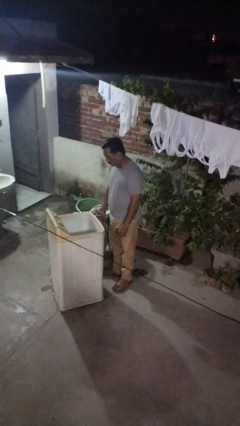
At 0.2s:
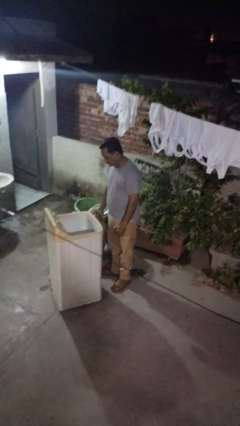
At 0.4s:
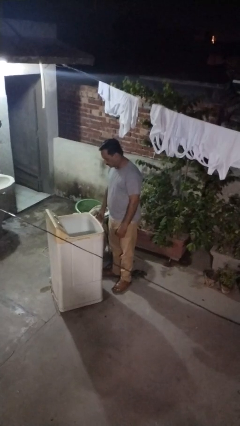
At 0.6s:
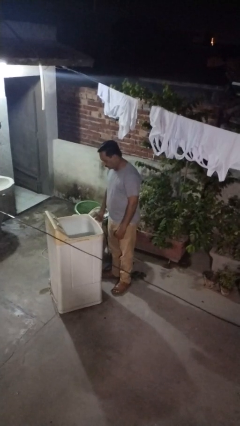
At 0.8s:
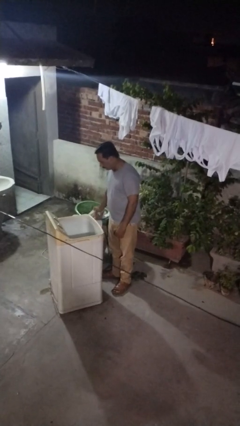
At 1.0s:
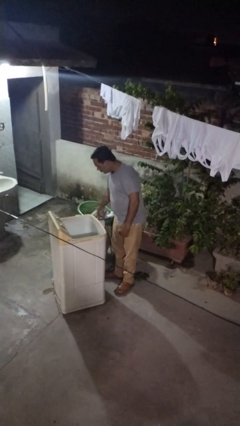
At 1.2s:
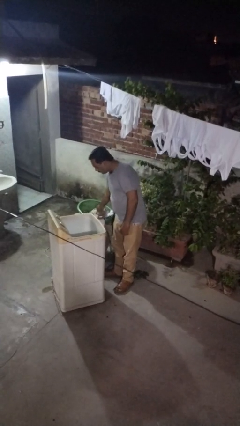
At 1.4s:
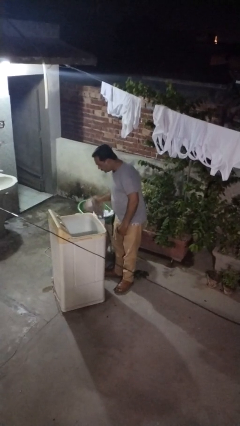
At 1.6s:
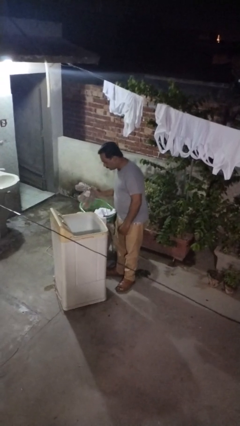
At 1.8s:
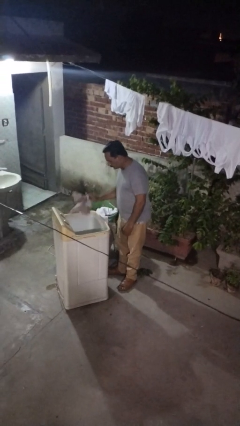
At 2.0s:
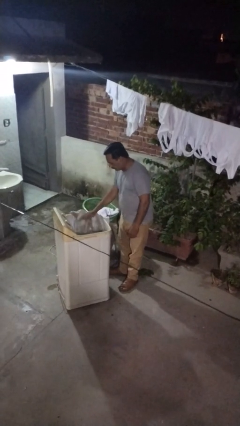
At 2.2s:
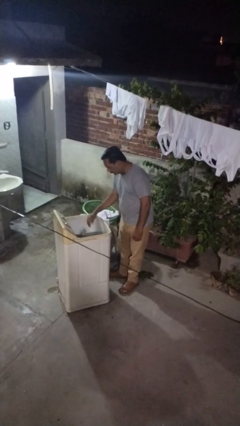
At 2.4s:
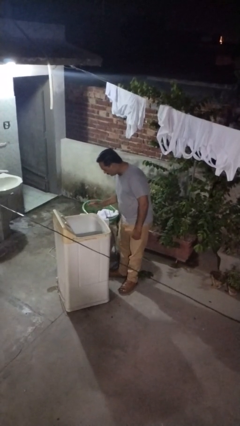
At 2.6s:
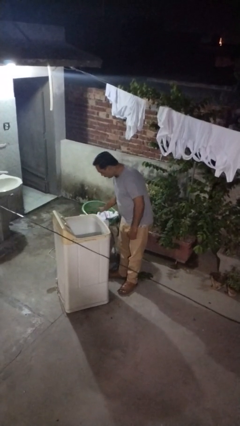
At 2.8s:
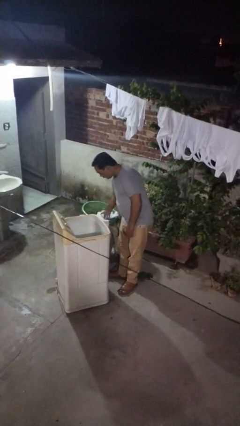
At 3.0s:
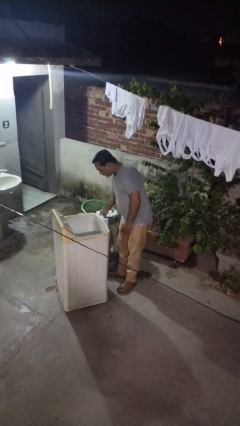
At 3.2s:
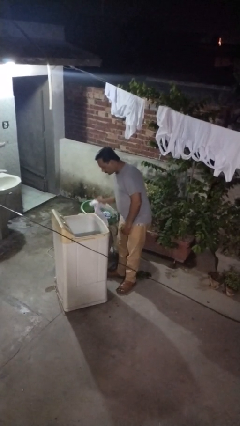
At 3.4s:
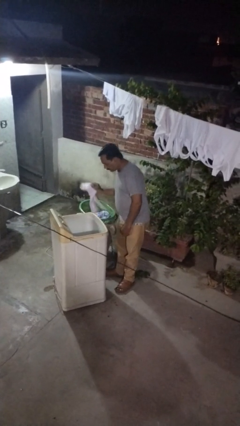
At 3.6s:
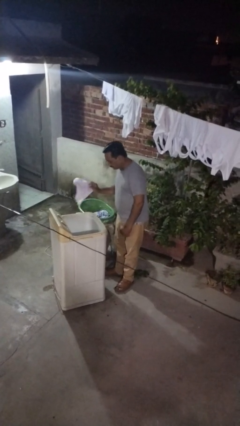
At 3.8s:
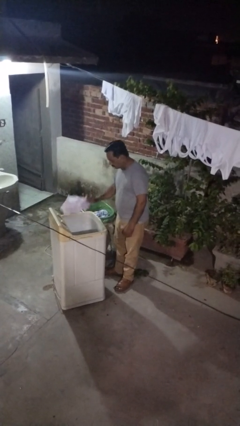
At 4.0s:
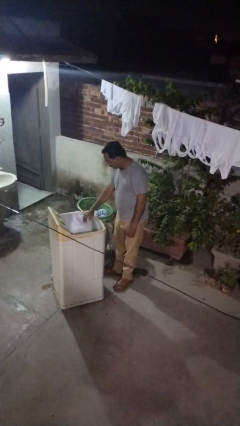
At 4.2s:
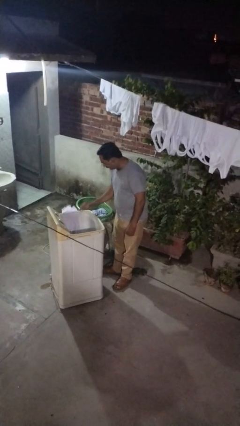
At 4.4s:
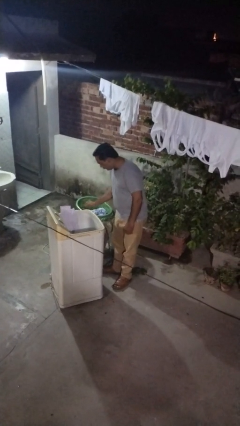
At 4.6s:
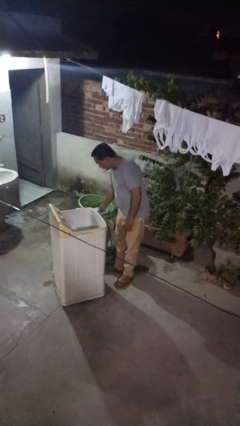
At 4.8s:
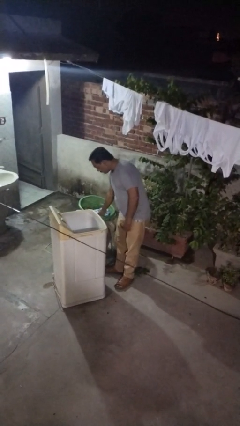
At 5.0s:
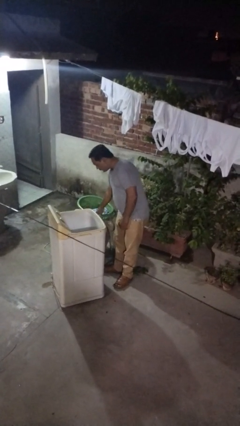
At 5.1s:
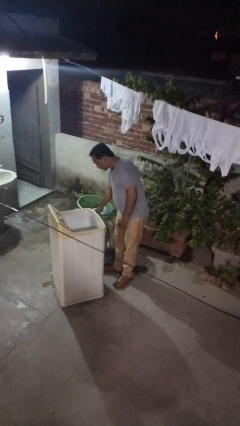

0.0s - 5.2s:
person unloads clotheswasher

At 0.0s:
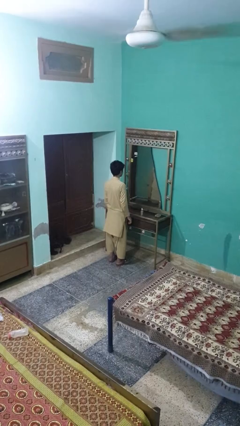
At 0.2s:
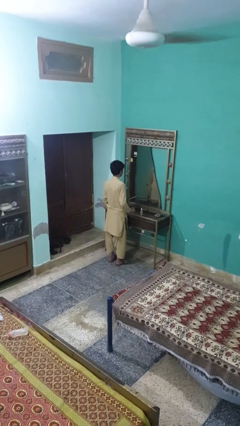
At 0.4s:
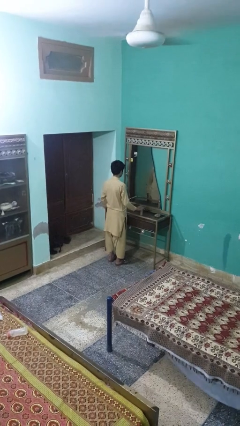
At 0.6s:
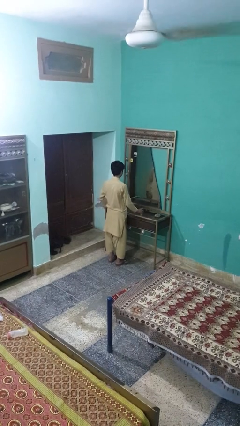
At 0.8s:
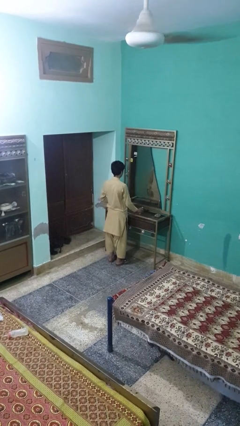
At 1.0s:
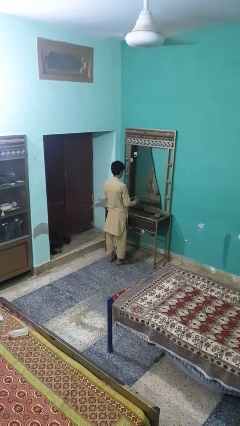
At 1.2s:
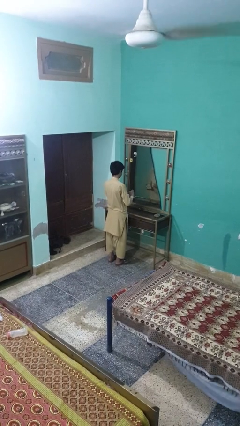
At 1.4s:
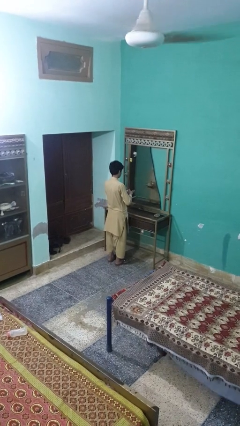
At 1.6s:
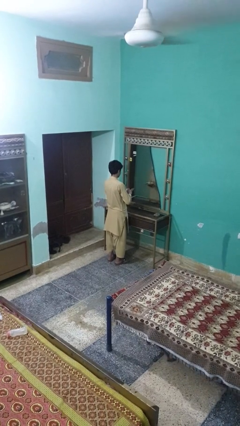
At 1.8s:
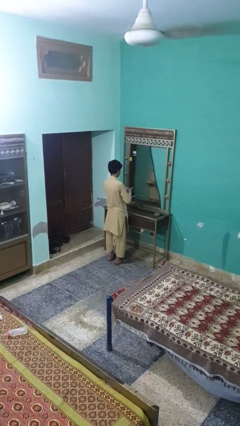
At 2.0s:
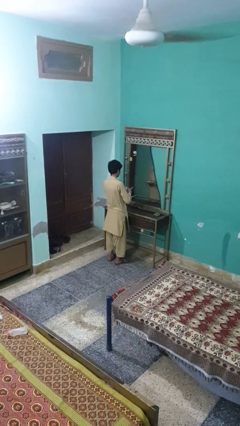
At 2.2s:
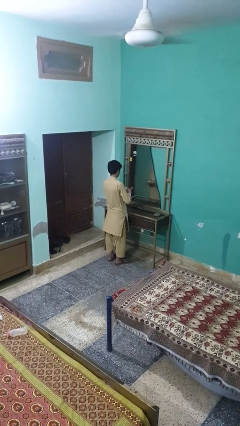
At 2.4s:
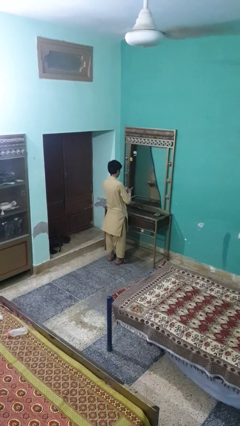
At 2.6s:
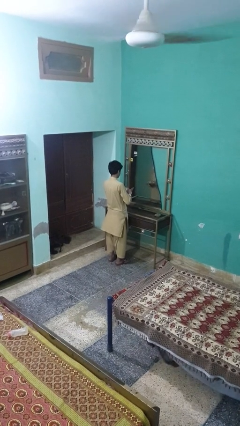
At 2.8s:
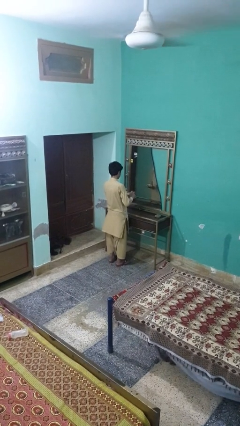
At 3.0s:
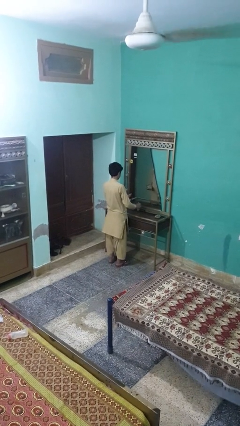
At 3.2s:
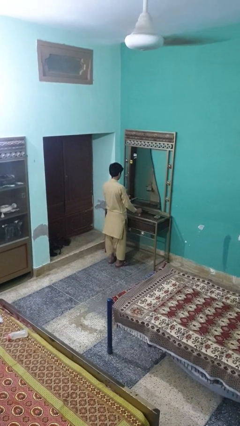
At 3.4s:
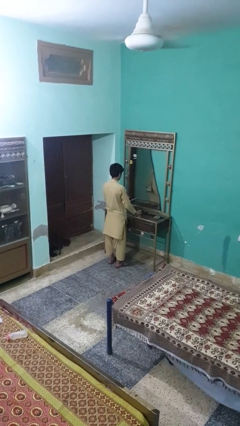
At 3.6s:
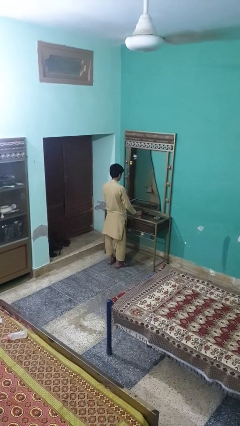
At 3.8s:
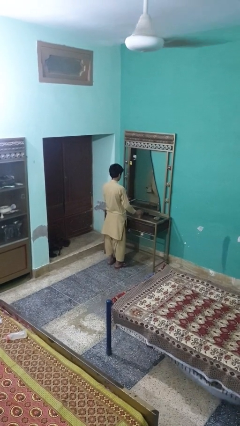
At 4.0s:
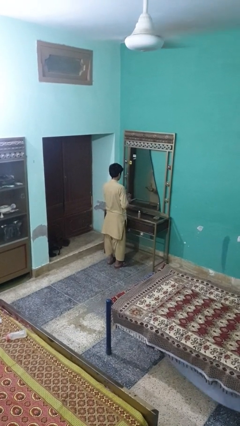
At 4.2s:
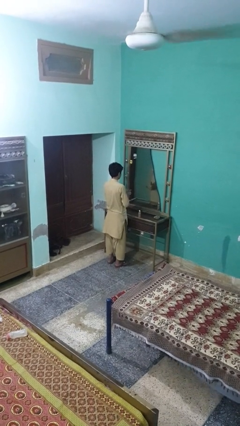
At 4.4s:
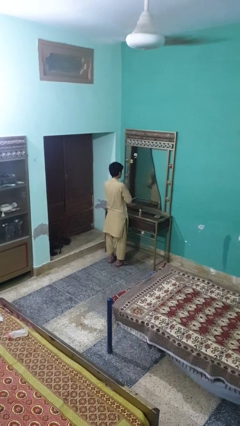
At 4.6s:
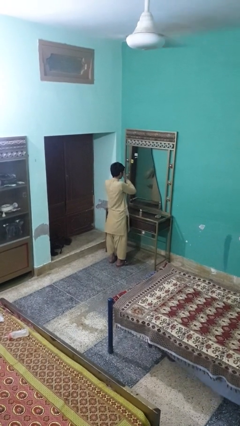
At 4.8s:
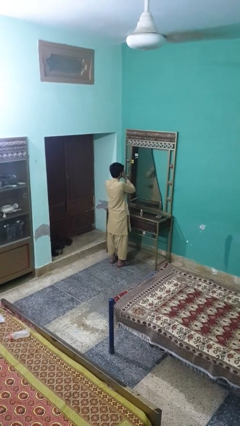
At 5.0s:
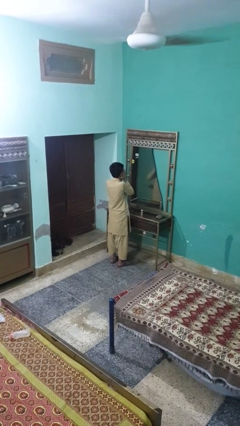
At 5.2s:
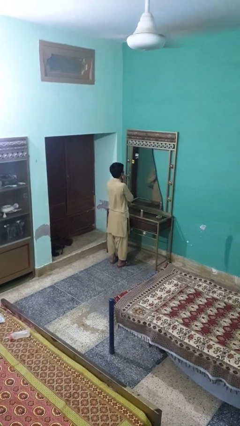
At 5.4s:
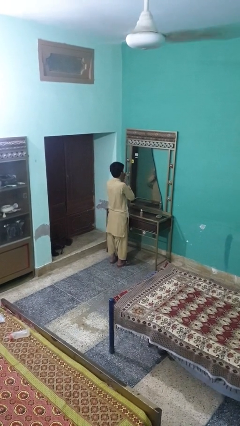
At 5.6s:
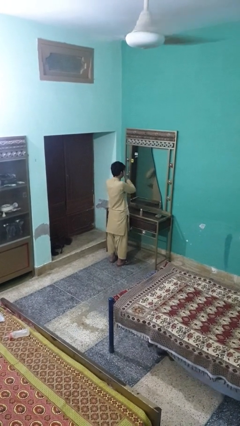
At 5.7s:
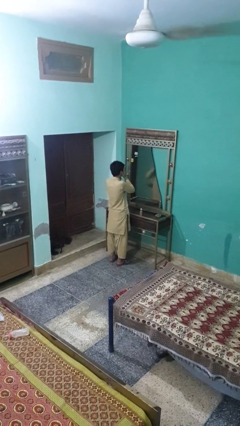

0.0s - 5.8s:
person applies foundation makeup

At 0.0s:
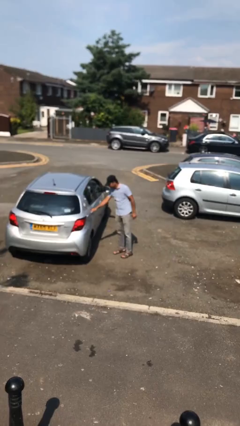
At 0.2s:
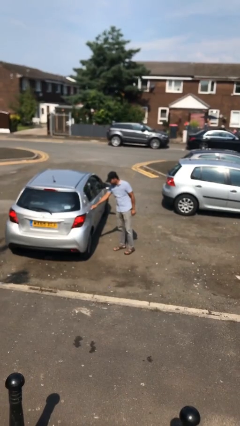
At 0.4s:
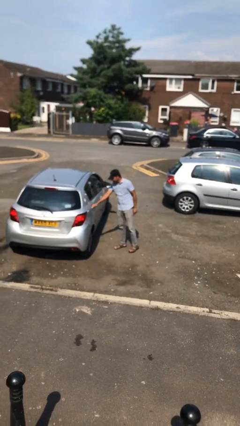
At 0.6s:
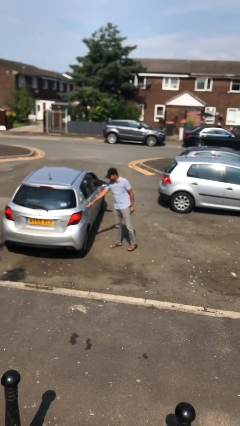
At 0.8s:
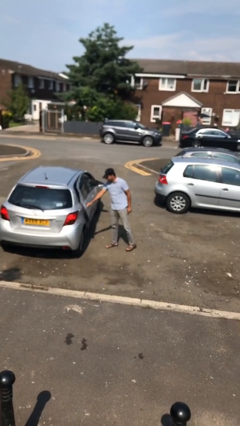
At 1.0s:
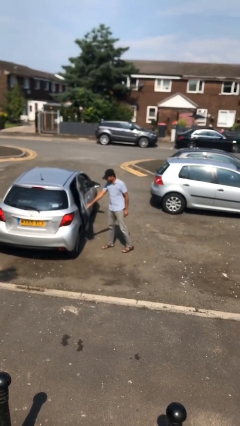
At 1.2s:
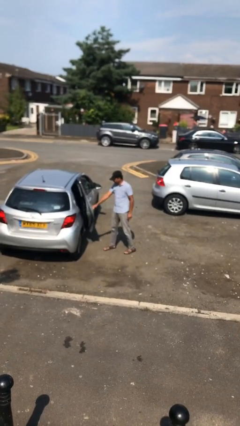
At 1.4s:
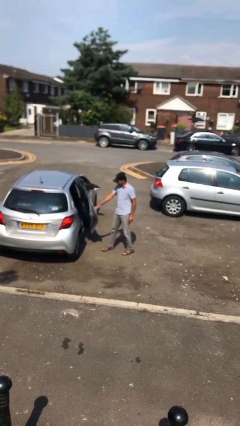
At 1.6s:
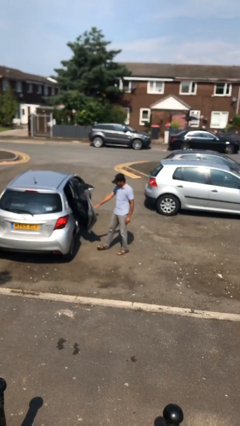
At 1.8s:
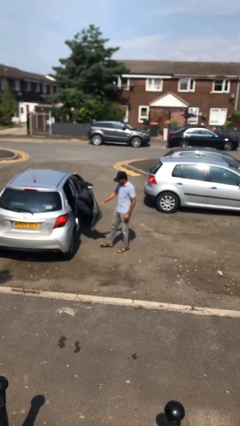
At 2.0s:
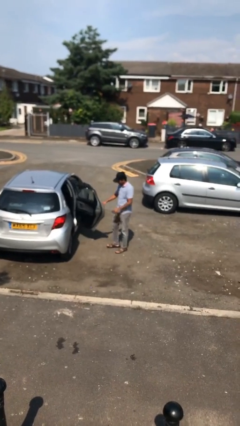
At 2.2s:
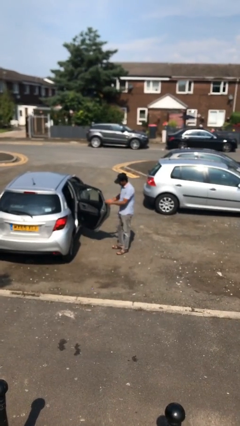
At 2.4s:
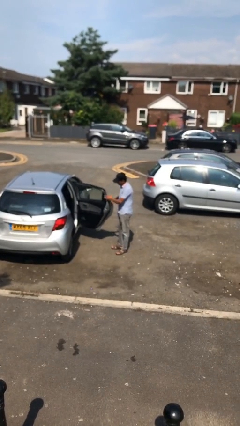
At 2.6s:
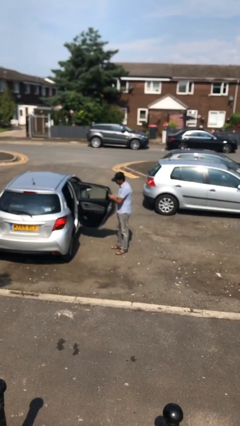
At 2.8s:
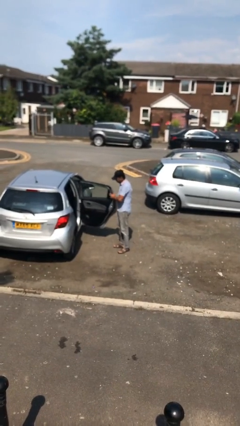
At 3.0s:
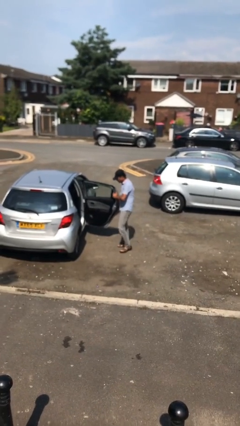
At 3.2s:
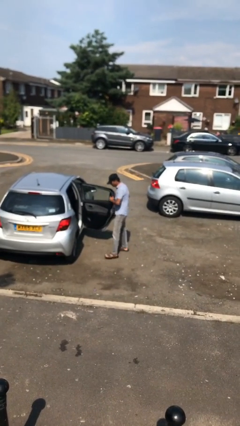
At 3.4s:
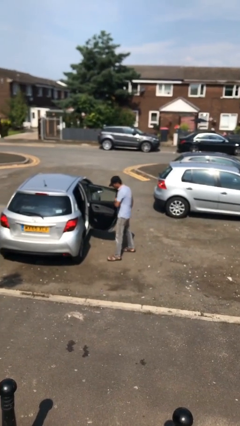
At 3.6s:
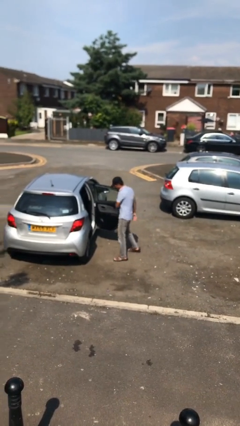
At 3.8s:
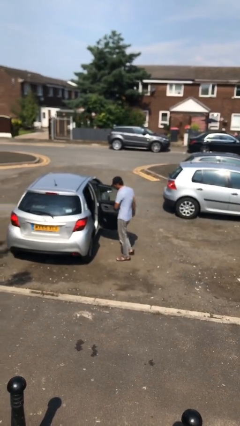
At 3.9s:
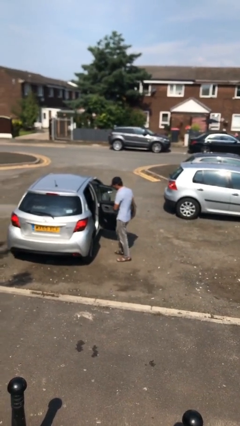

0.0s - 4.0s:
person opens car door

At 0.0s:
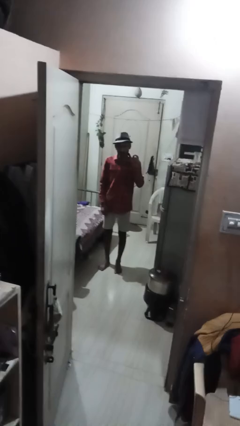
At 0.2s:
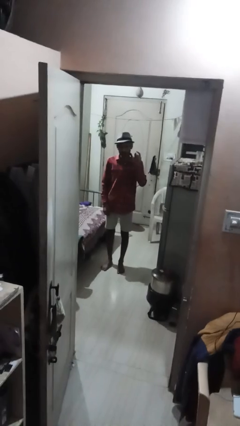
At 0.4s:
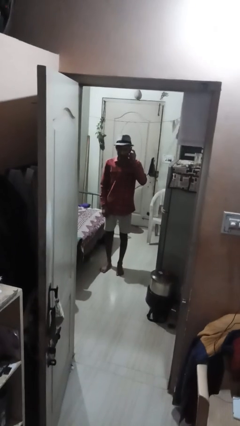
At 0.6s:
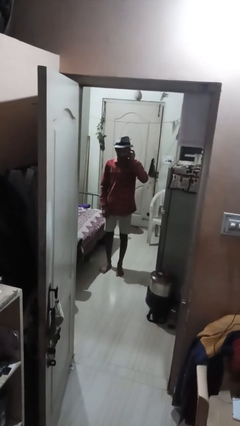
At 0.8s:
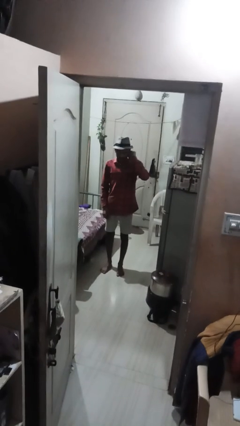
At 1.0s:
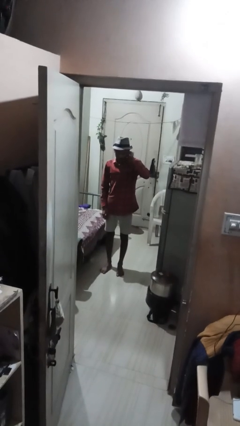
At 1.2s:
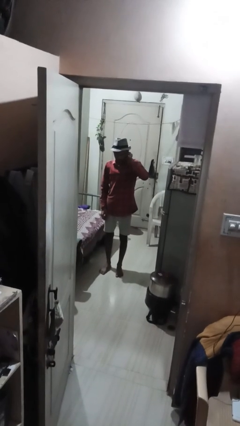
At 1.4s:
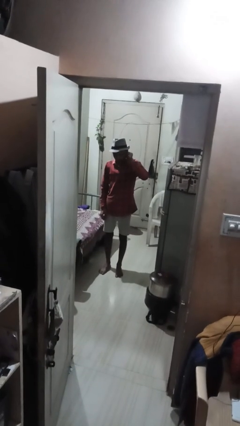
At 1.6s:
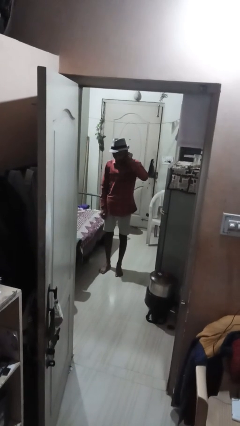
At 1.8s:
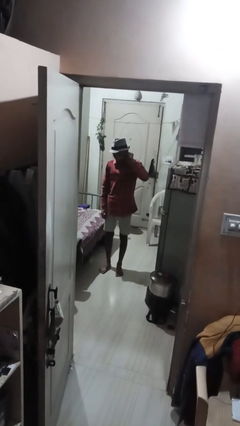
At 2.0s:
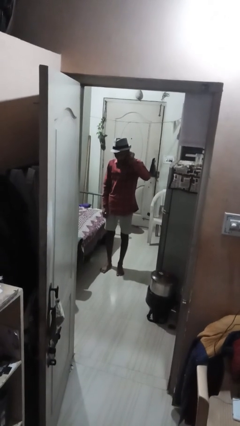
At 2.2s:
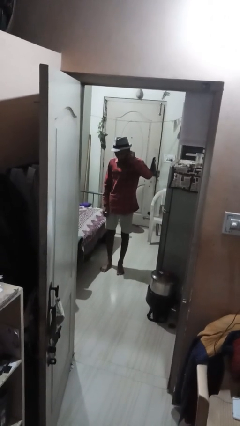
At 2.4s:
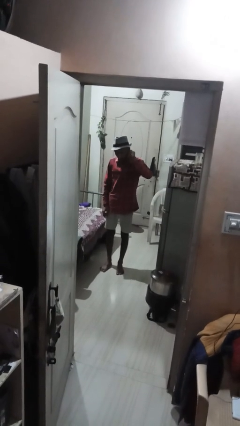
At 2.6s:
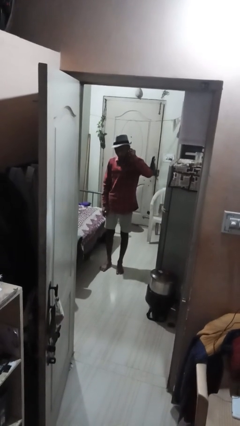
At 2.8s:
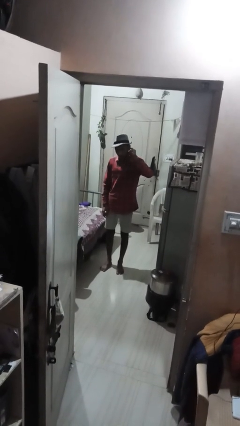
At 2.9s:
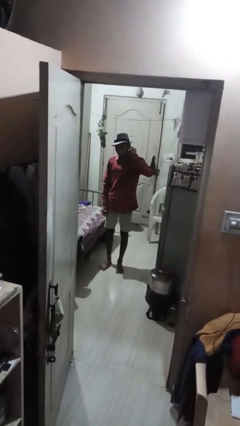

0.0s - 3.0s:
person touches earlobe

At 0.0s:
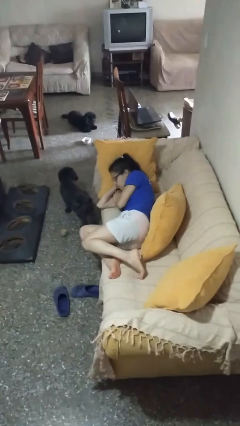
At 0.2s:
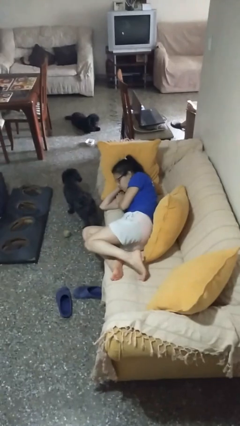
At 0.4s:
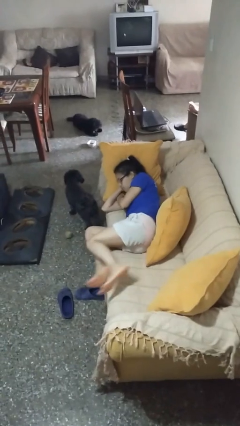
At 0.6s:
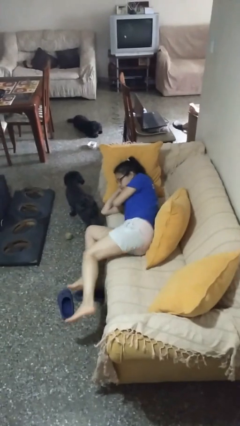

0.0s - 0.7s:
person stands up
